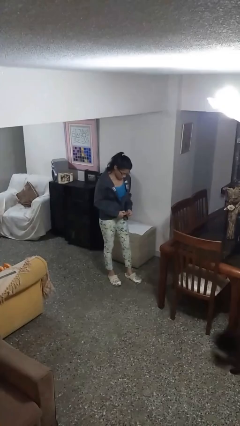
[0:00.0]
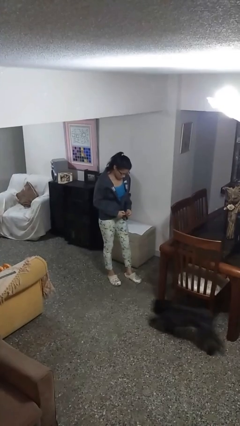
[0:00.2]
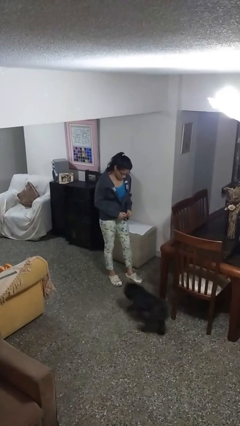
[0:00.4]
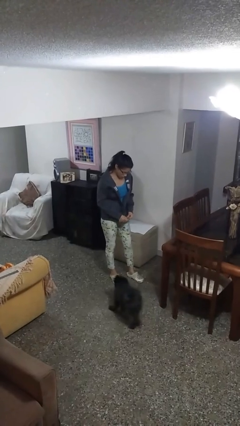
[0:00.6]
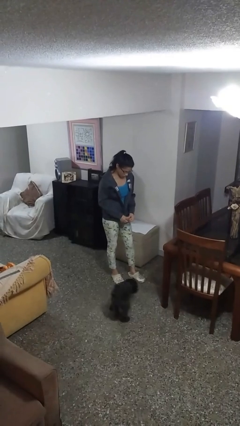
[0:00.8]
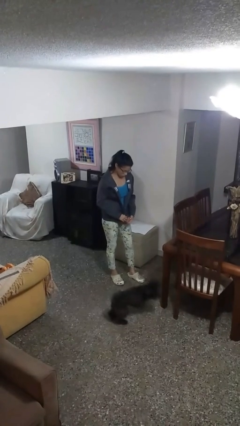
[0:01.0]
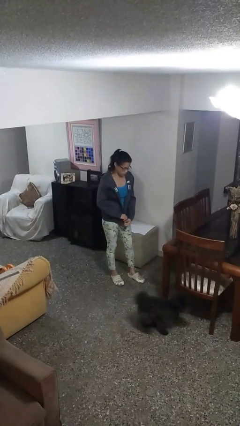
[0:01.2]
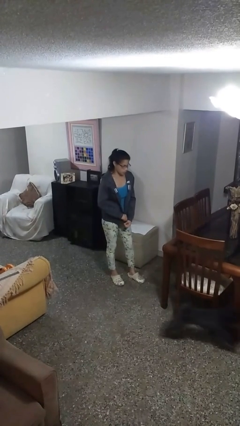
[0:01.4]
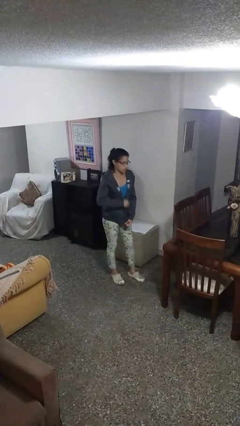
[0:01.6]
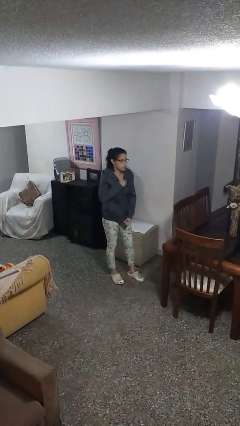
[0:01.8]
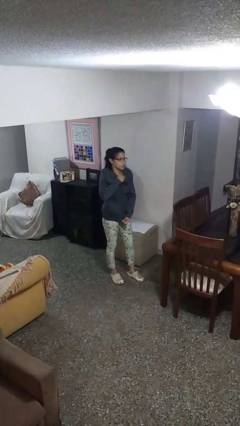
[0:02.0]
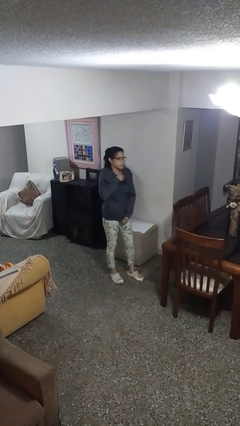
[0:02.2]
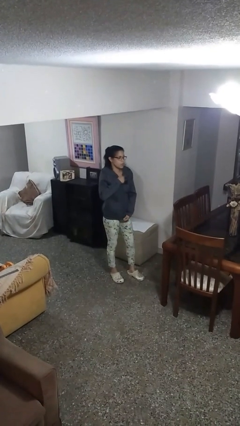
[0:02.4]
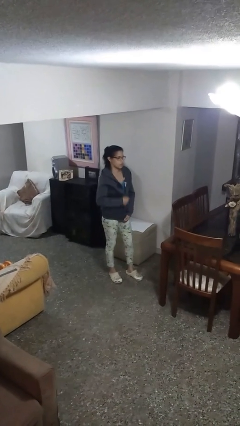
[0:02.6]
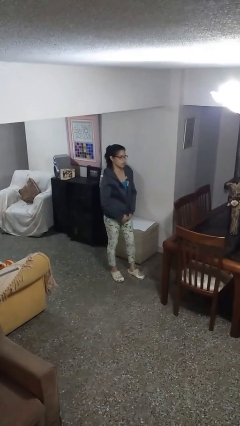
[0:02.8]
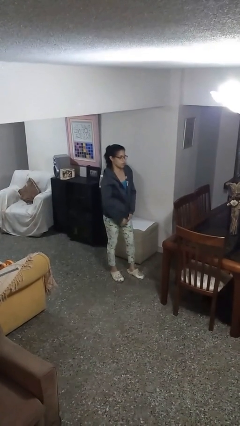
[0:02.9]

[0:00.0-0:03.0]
person zips up jacket

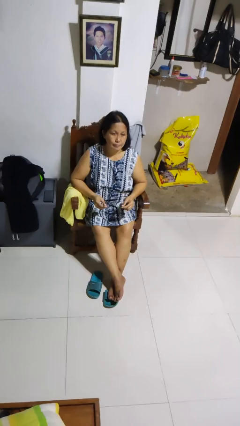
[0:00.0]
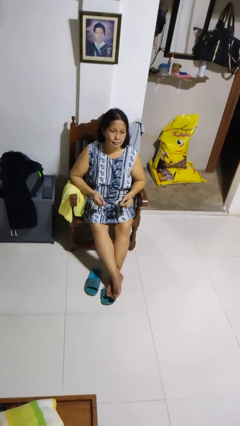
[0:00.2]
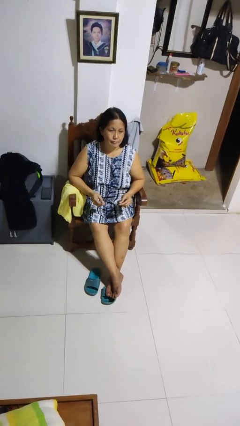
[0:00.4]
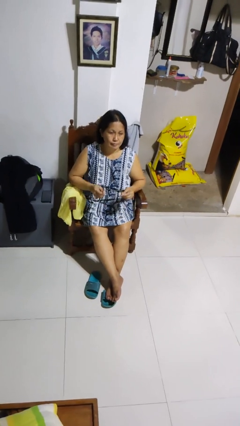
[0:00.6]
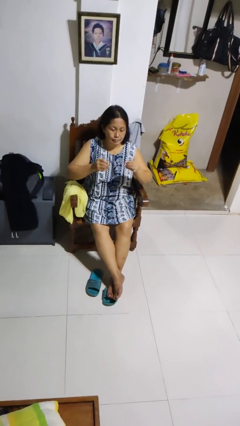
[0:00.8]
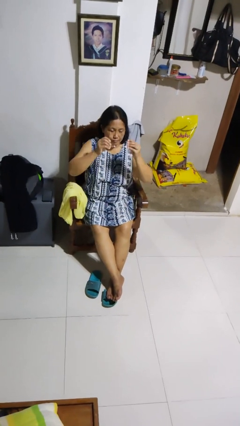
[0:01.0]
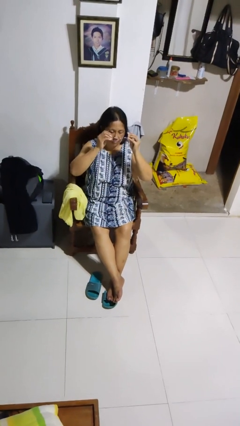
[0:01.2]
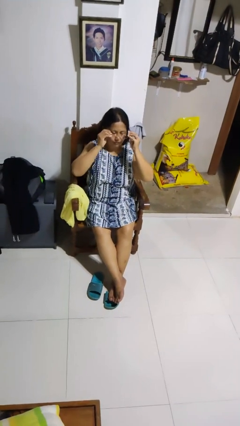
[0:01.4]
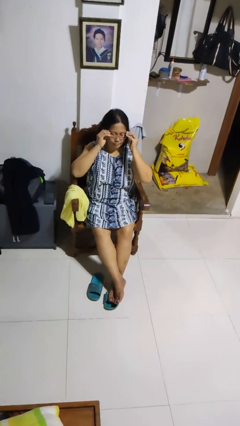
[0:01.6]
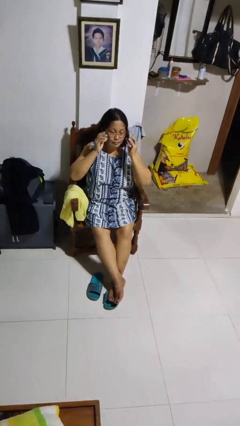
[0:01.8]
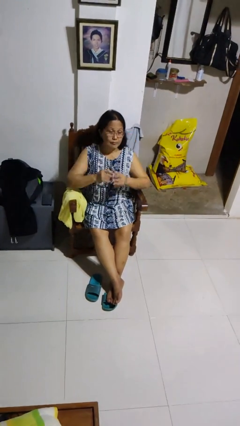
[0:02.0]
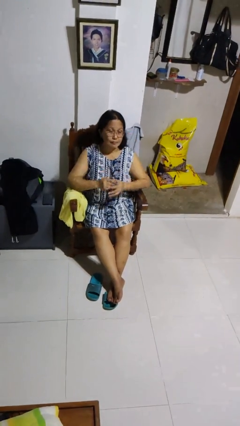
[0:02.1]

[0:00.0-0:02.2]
person puts on glasses

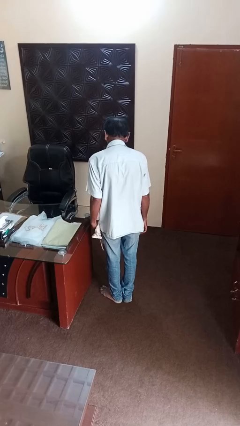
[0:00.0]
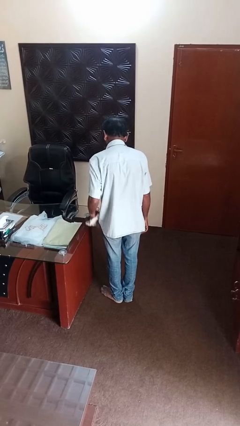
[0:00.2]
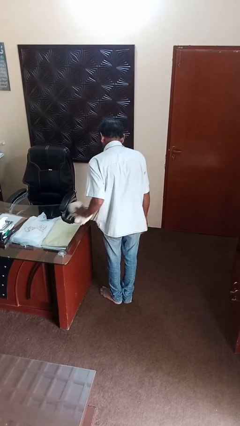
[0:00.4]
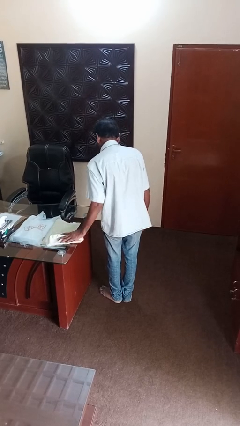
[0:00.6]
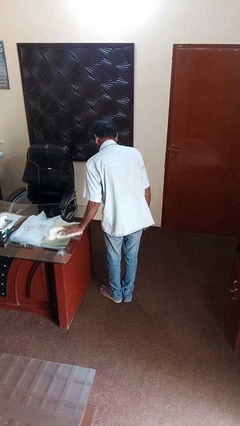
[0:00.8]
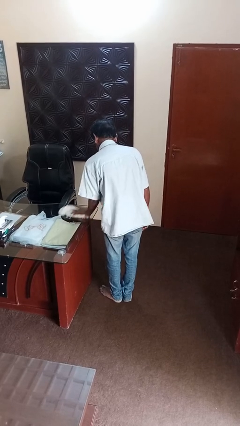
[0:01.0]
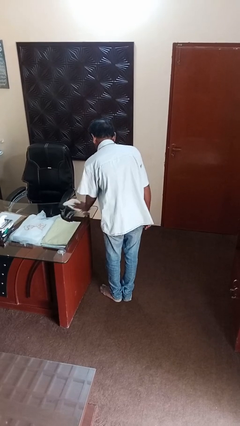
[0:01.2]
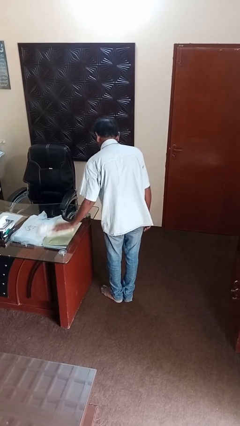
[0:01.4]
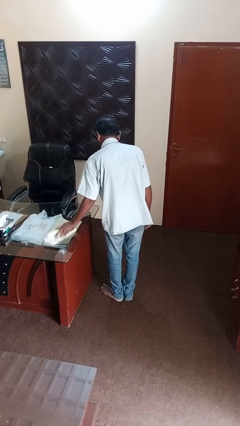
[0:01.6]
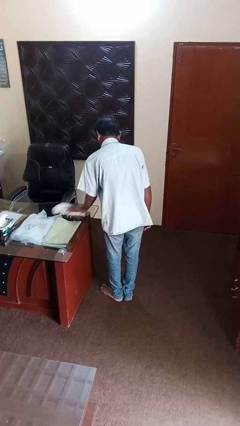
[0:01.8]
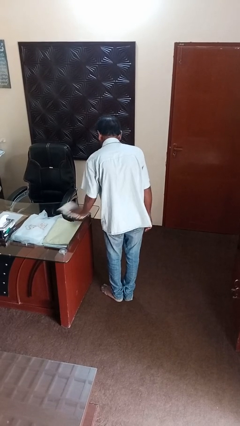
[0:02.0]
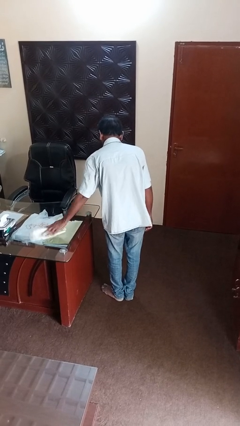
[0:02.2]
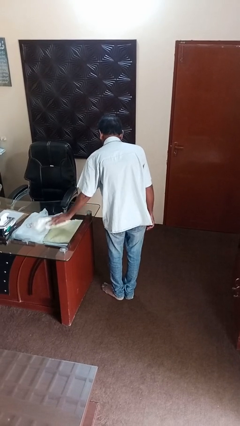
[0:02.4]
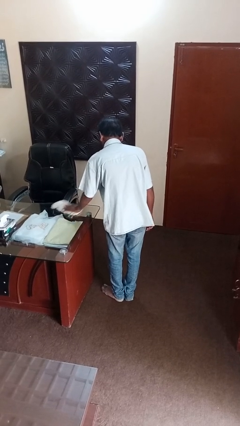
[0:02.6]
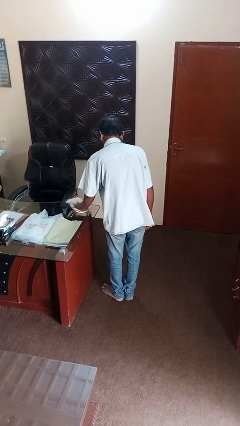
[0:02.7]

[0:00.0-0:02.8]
person cleans table with rag

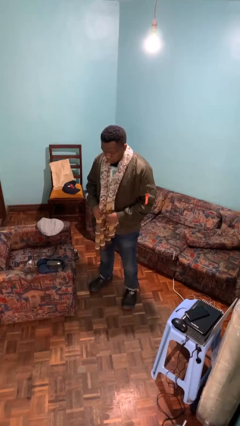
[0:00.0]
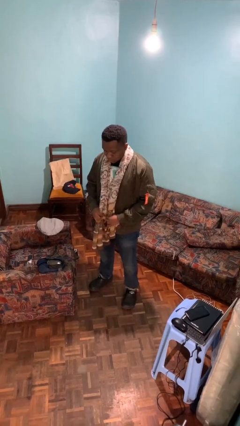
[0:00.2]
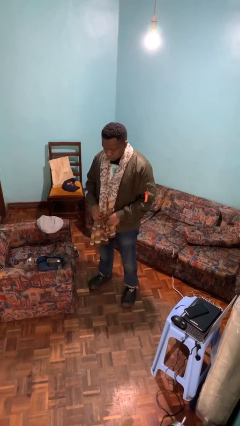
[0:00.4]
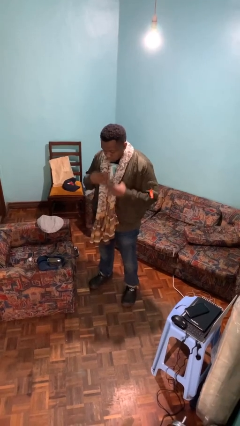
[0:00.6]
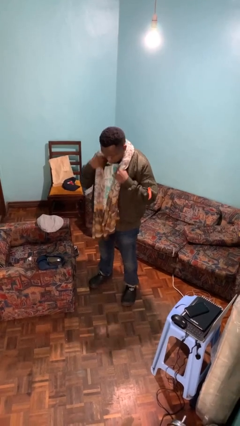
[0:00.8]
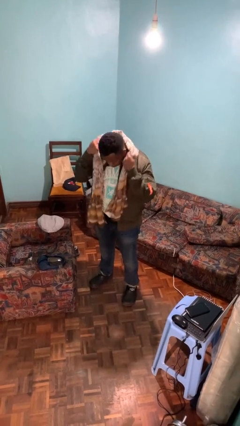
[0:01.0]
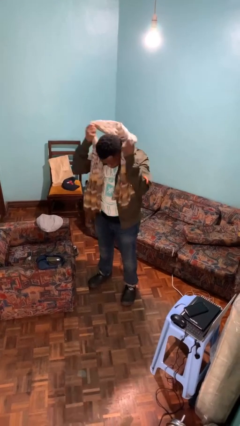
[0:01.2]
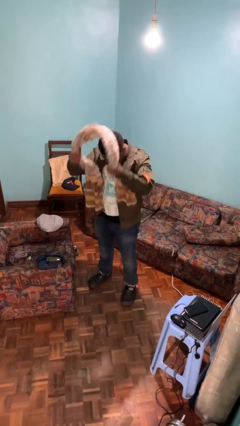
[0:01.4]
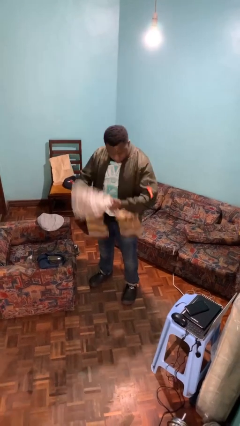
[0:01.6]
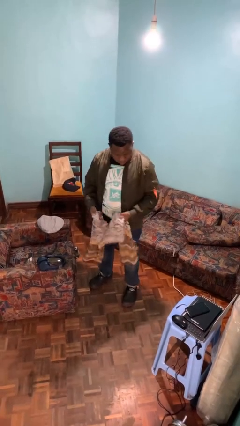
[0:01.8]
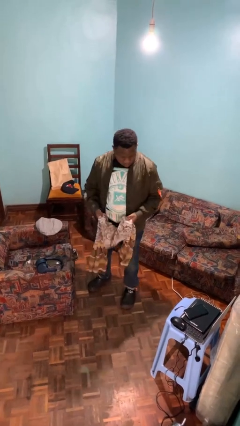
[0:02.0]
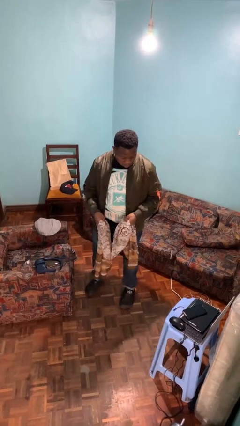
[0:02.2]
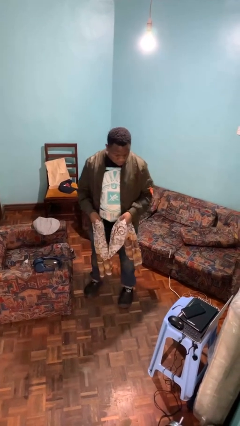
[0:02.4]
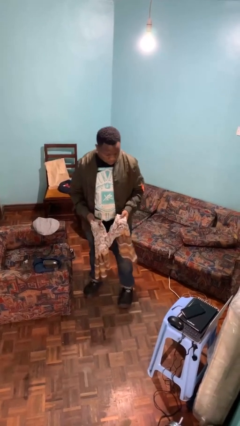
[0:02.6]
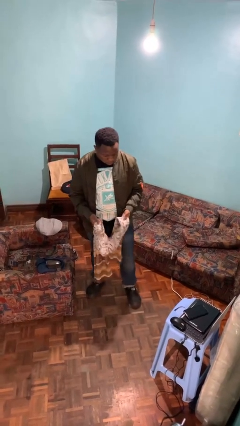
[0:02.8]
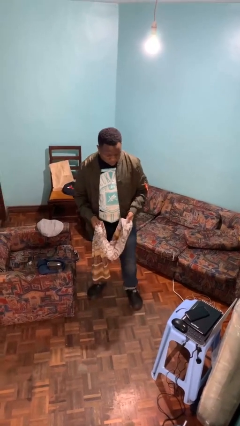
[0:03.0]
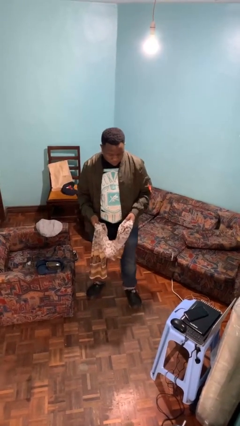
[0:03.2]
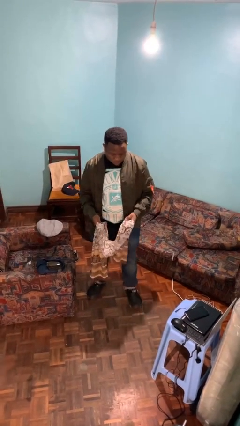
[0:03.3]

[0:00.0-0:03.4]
person takes off scarf

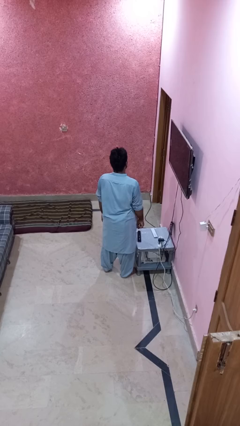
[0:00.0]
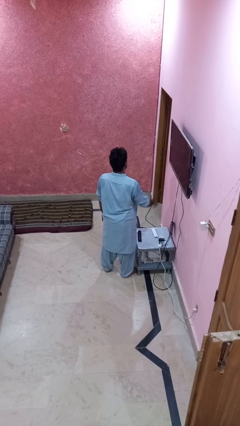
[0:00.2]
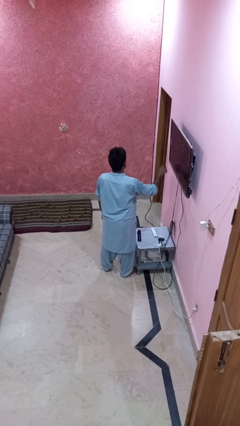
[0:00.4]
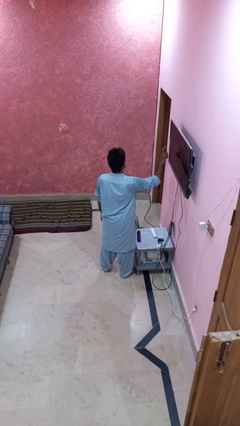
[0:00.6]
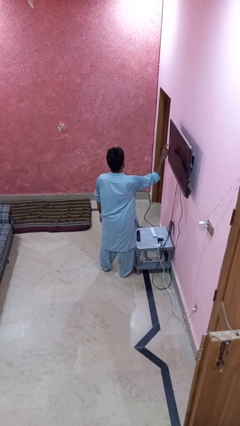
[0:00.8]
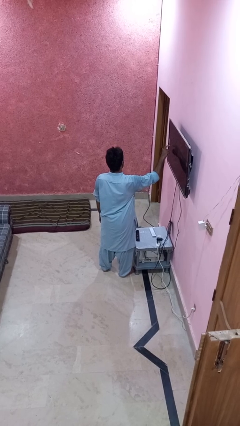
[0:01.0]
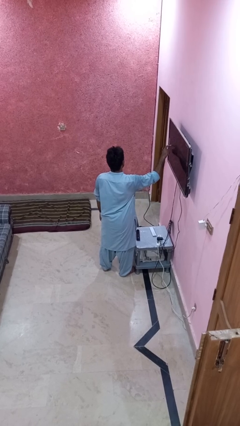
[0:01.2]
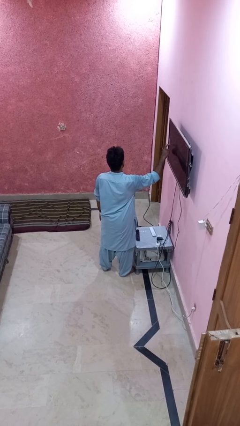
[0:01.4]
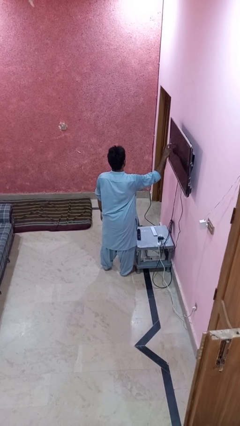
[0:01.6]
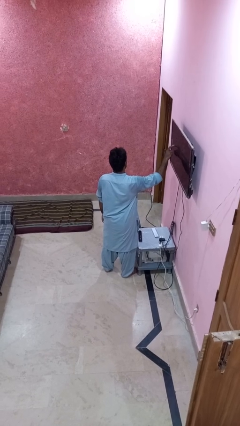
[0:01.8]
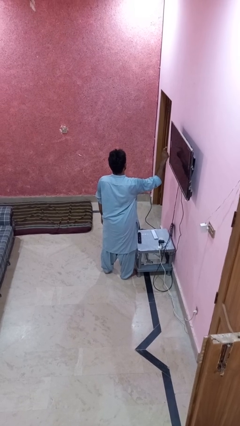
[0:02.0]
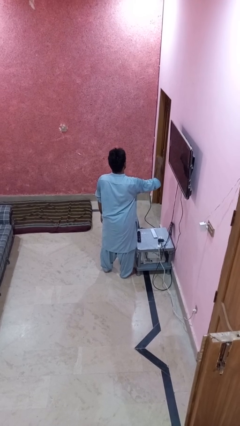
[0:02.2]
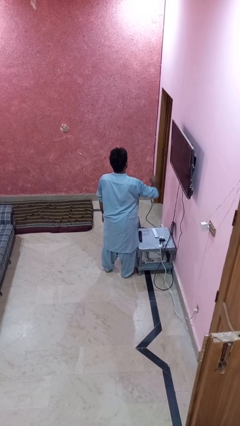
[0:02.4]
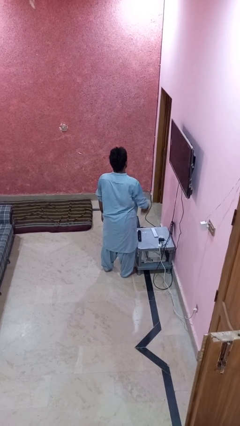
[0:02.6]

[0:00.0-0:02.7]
person taps object with finger

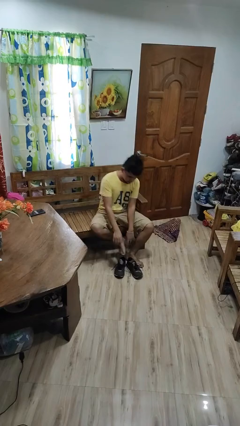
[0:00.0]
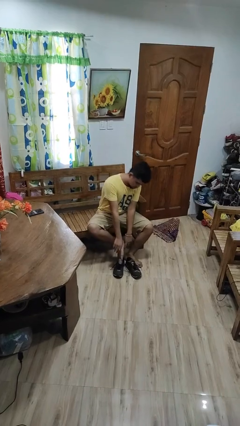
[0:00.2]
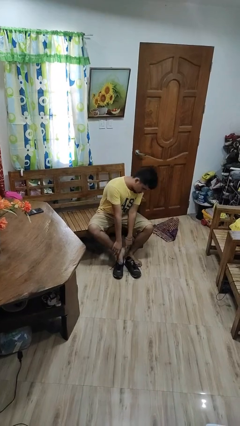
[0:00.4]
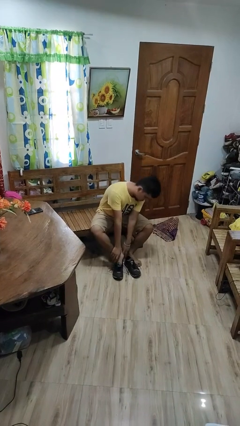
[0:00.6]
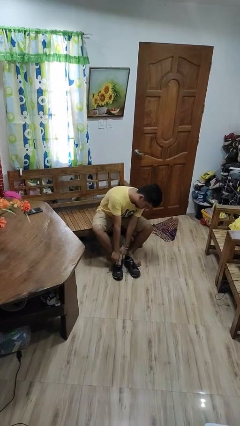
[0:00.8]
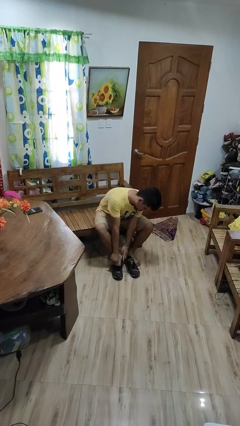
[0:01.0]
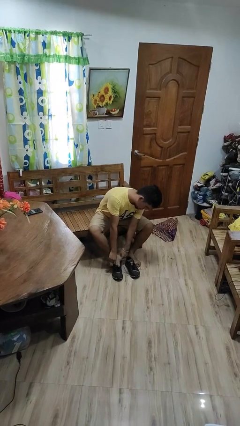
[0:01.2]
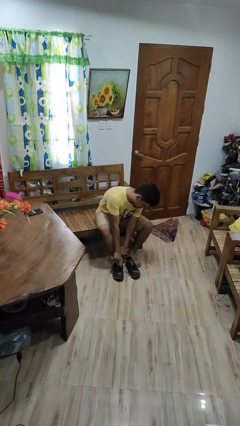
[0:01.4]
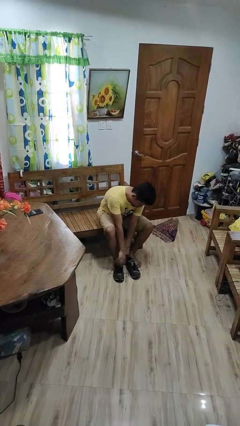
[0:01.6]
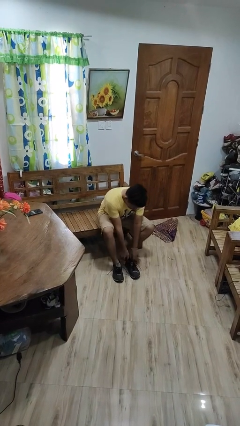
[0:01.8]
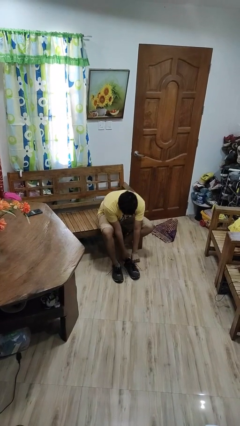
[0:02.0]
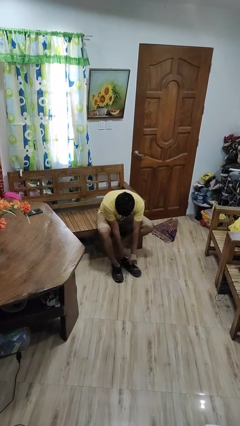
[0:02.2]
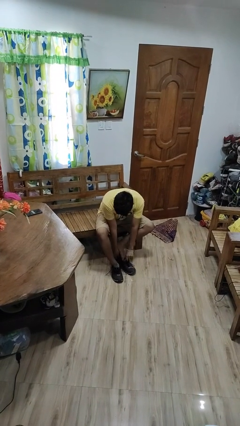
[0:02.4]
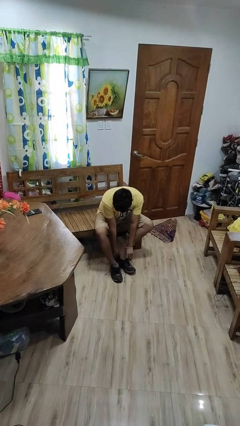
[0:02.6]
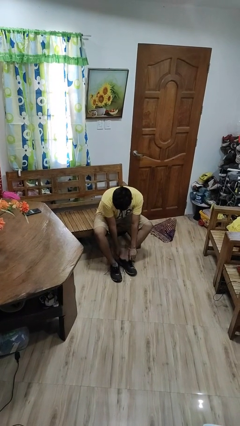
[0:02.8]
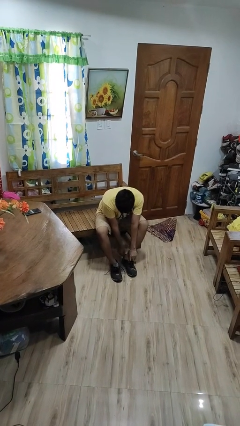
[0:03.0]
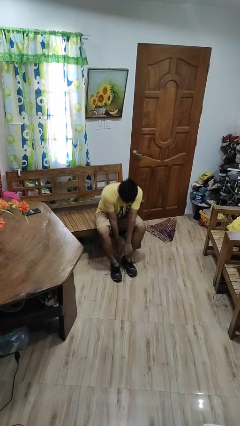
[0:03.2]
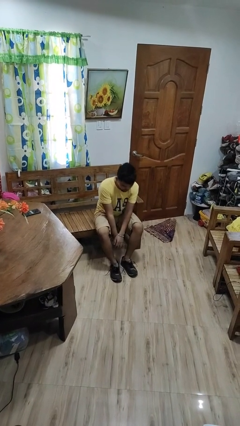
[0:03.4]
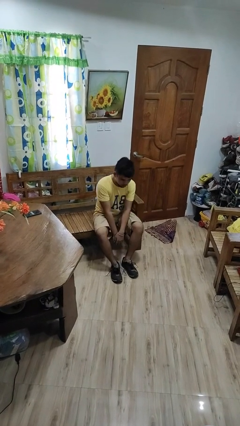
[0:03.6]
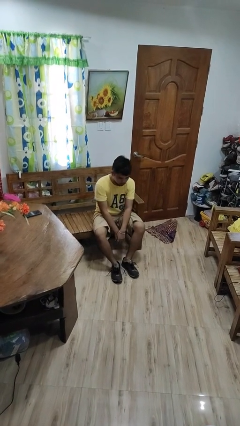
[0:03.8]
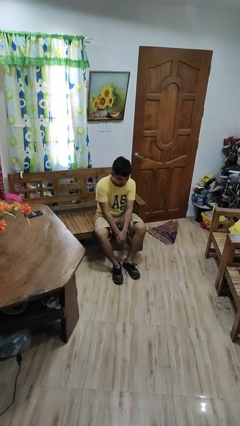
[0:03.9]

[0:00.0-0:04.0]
person puts on shoes
